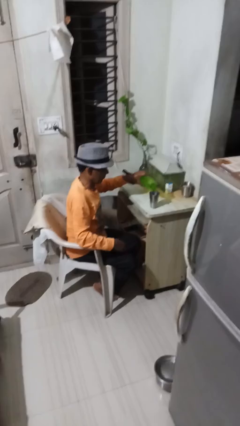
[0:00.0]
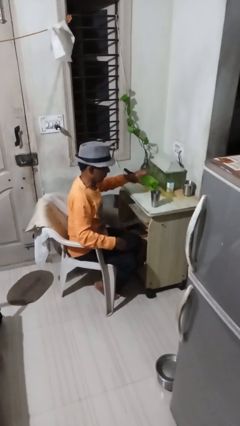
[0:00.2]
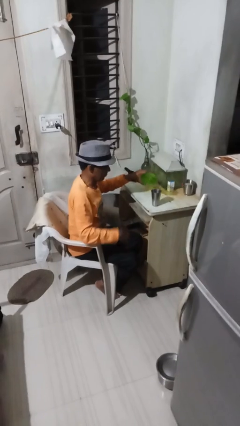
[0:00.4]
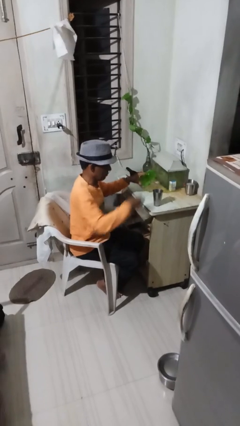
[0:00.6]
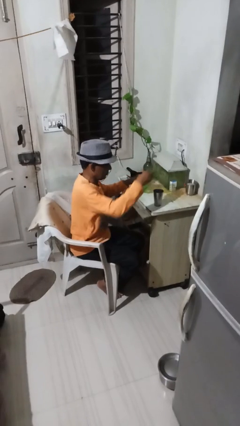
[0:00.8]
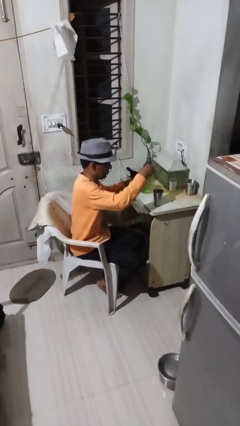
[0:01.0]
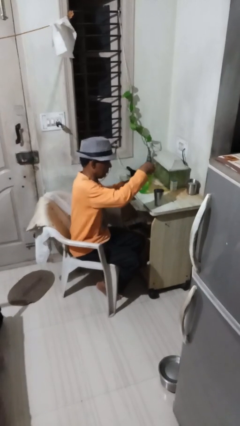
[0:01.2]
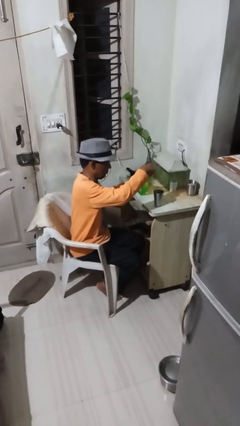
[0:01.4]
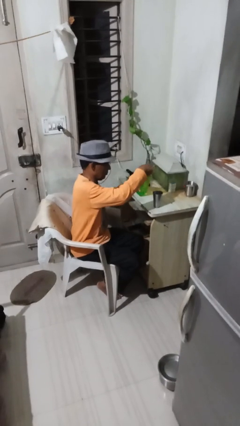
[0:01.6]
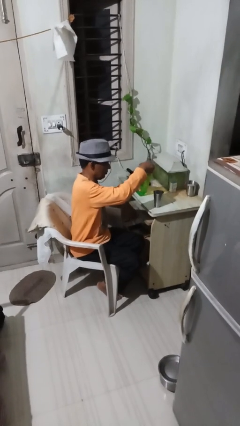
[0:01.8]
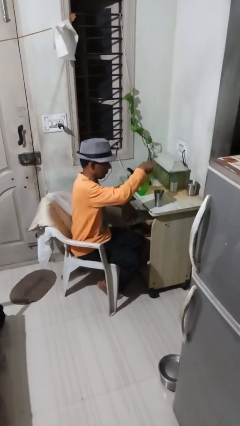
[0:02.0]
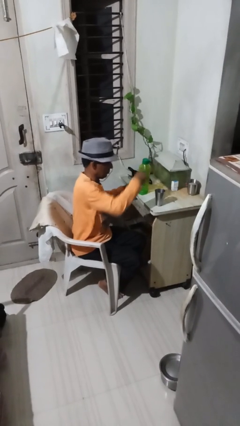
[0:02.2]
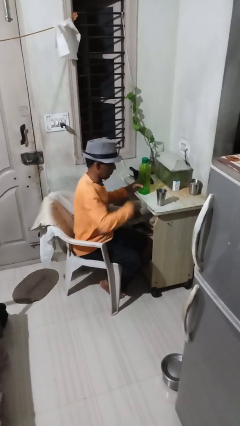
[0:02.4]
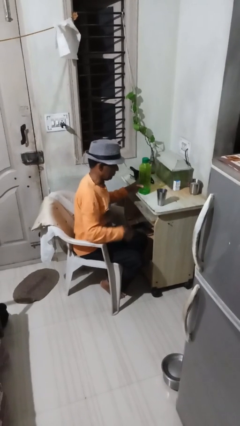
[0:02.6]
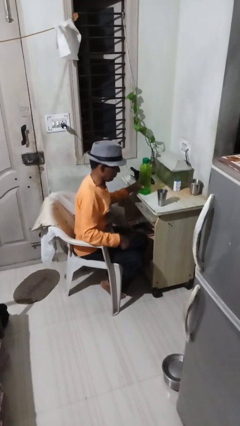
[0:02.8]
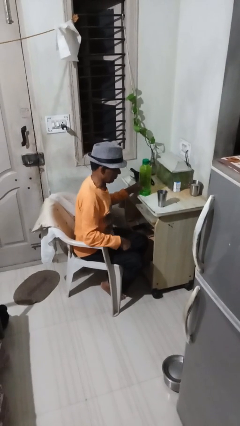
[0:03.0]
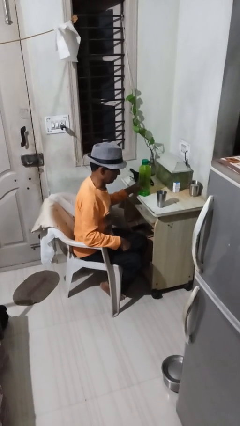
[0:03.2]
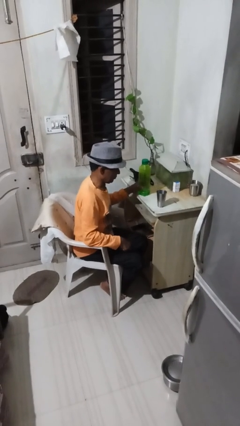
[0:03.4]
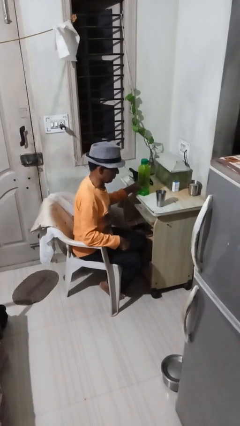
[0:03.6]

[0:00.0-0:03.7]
person screws lid to bottle

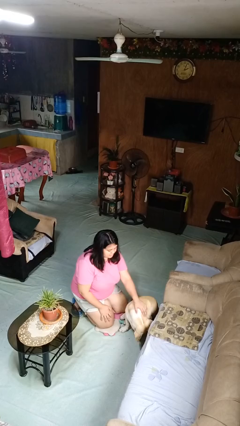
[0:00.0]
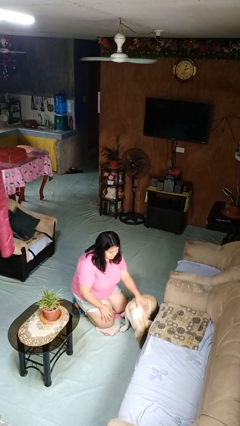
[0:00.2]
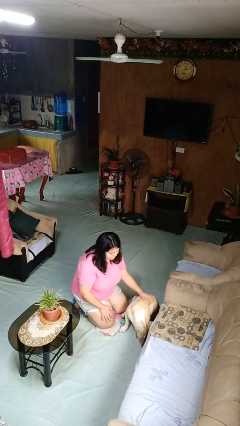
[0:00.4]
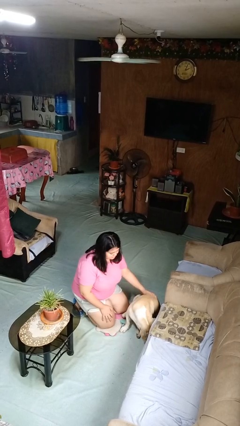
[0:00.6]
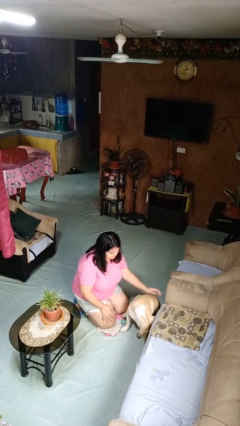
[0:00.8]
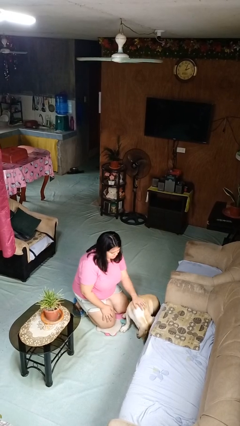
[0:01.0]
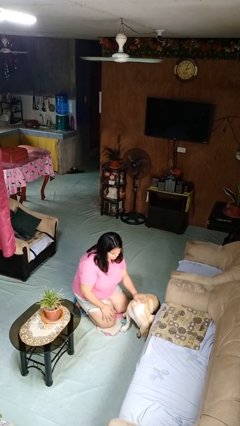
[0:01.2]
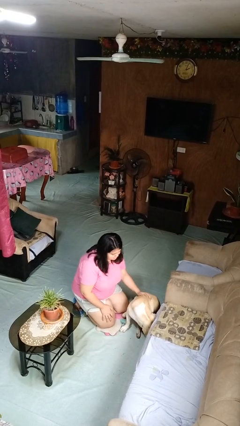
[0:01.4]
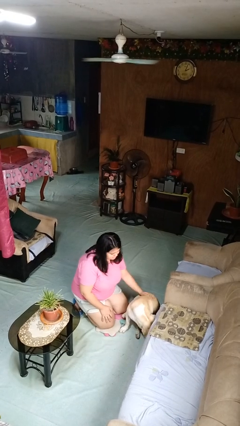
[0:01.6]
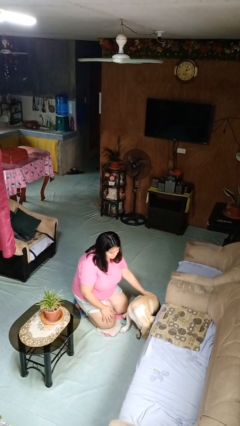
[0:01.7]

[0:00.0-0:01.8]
person pets dog

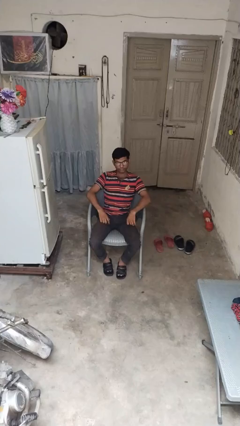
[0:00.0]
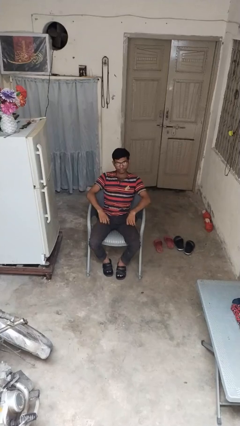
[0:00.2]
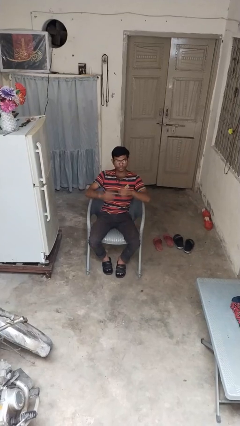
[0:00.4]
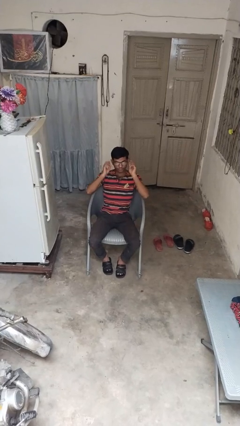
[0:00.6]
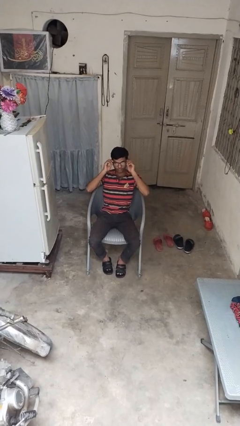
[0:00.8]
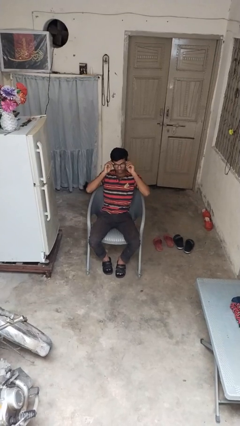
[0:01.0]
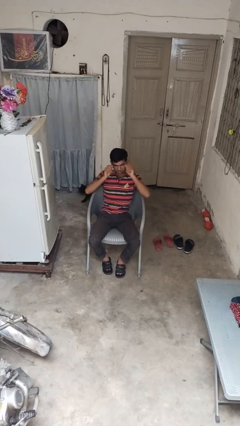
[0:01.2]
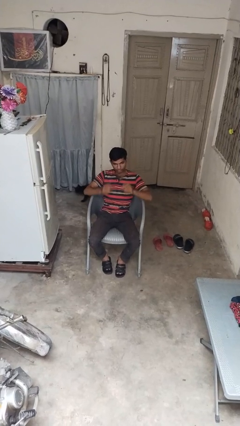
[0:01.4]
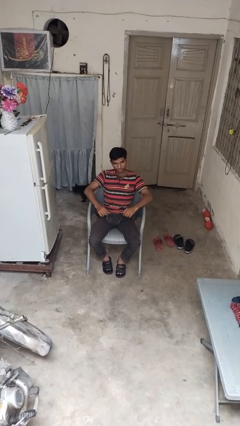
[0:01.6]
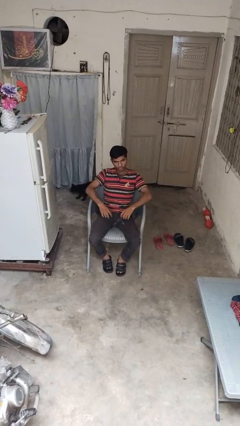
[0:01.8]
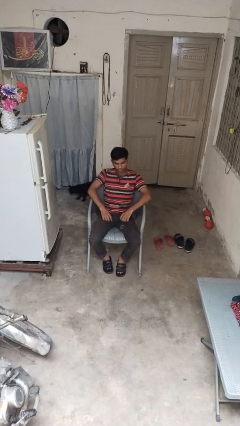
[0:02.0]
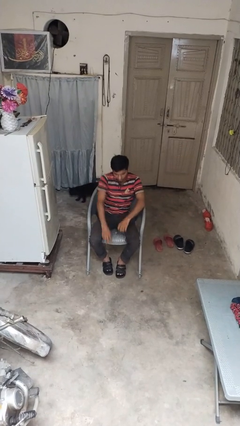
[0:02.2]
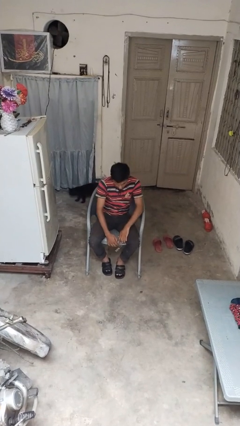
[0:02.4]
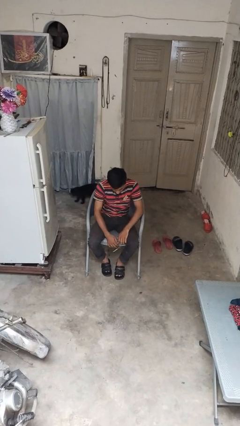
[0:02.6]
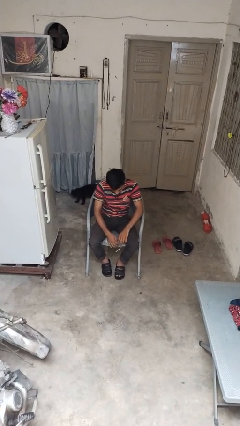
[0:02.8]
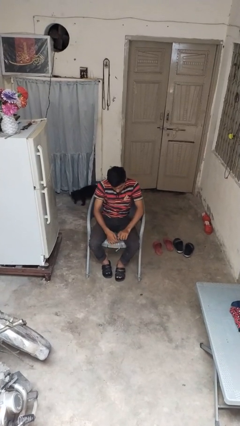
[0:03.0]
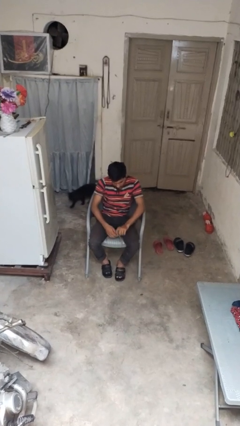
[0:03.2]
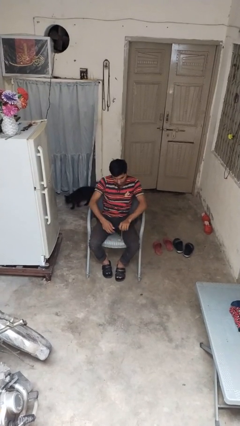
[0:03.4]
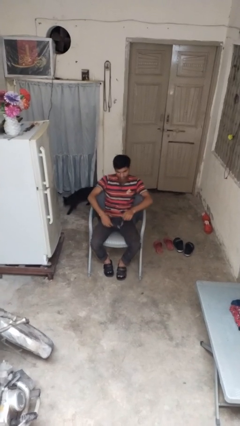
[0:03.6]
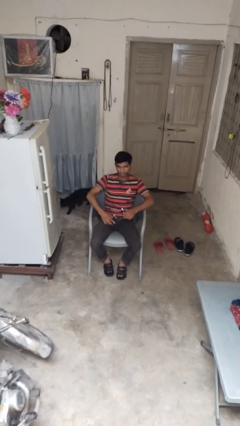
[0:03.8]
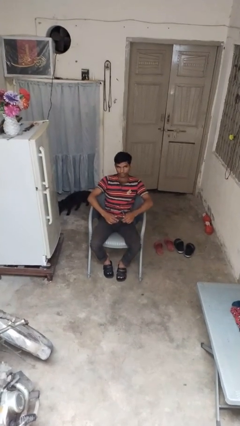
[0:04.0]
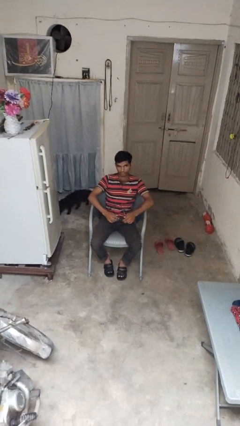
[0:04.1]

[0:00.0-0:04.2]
person takes off glasses

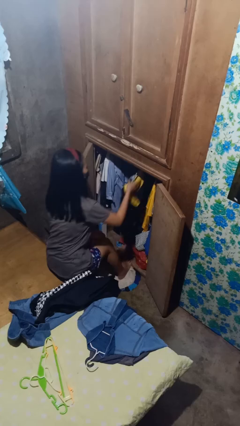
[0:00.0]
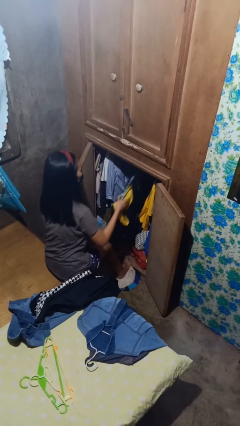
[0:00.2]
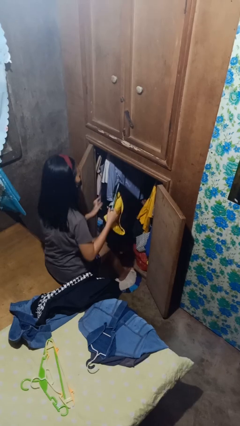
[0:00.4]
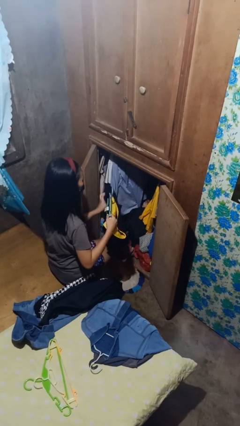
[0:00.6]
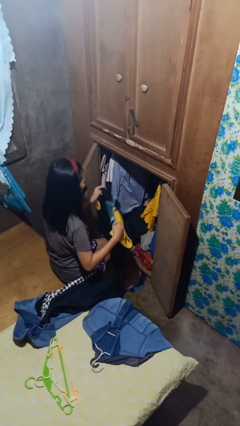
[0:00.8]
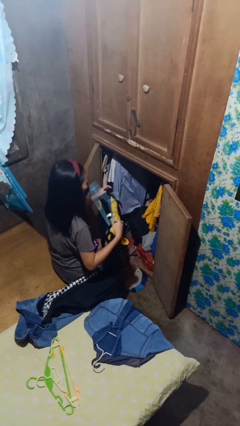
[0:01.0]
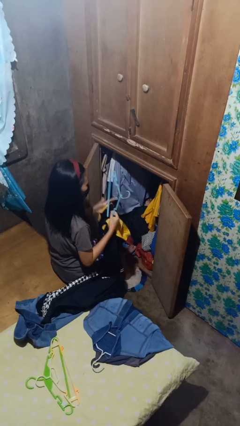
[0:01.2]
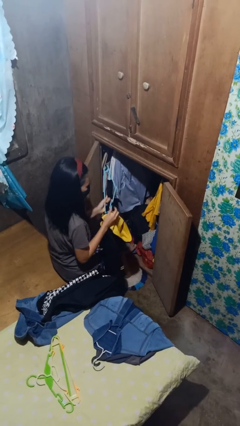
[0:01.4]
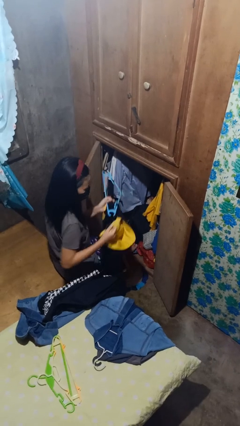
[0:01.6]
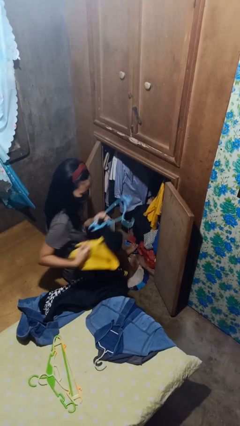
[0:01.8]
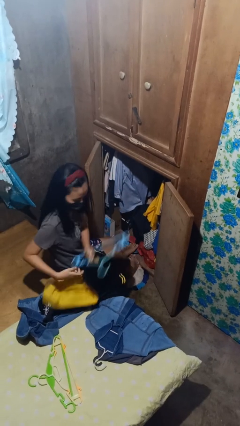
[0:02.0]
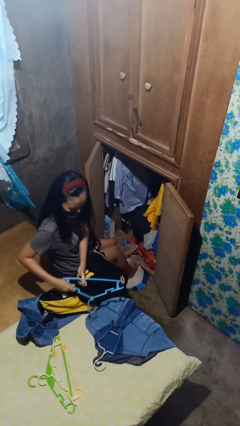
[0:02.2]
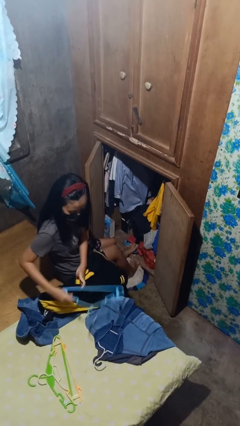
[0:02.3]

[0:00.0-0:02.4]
person takes clothes from closet

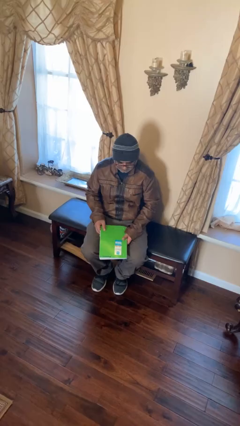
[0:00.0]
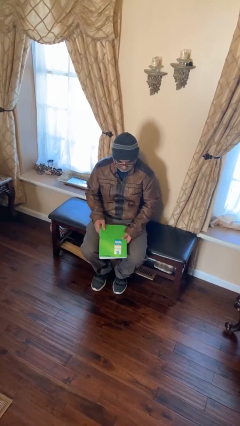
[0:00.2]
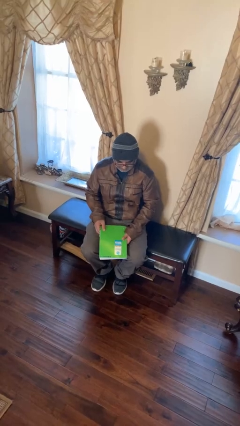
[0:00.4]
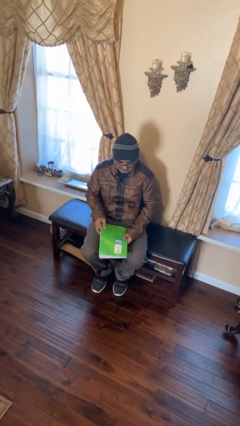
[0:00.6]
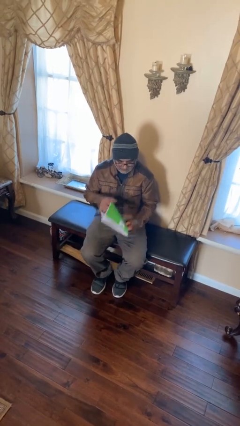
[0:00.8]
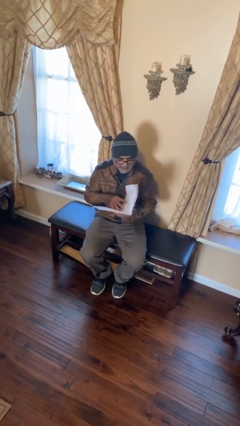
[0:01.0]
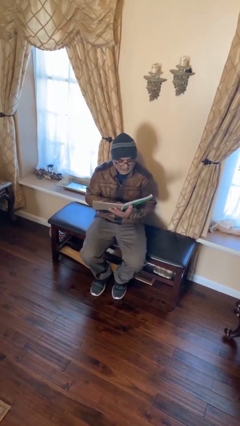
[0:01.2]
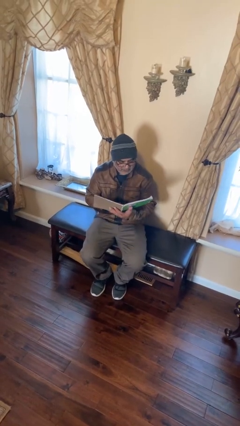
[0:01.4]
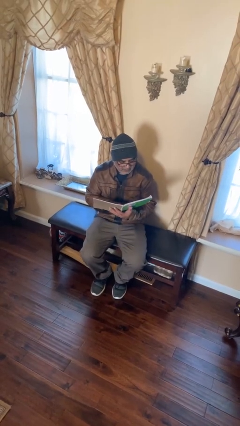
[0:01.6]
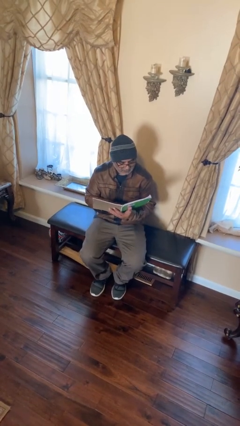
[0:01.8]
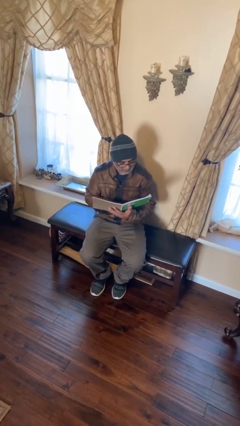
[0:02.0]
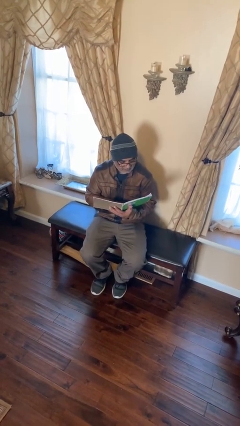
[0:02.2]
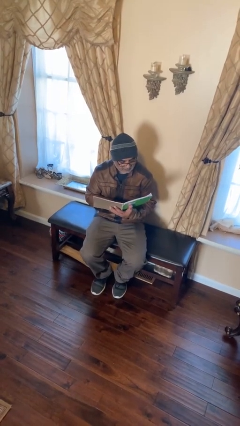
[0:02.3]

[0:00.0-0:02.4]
person reads document

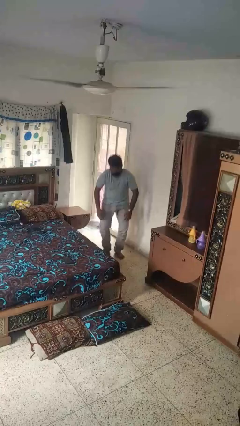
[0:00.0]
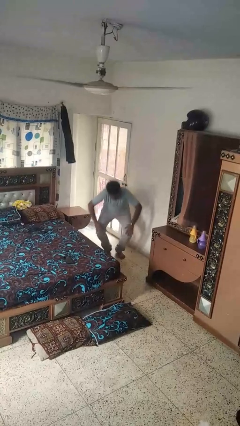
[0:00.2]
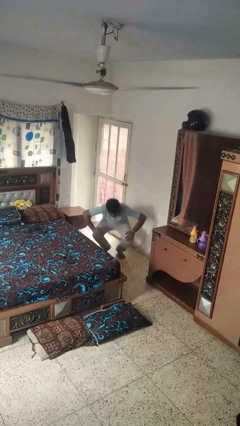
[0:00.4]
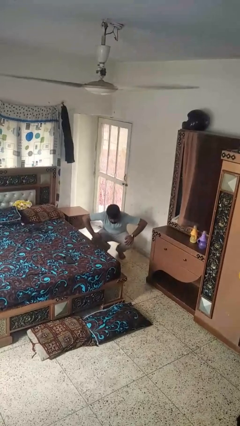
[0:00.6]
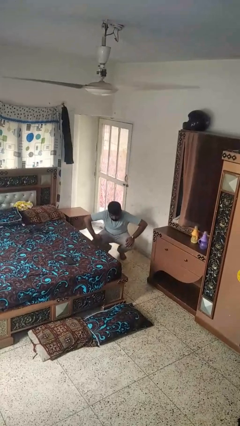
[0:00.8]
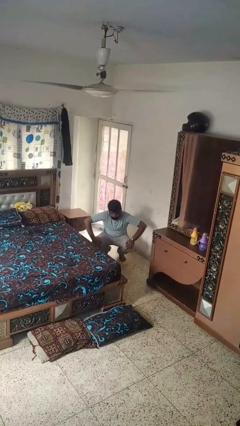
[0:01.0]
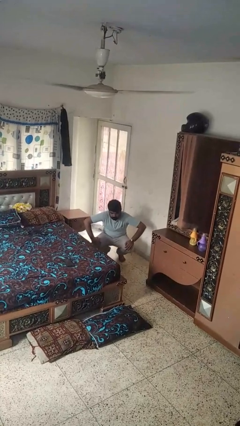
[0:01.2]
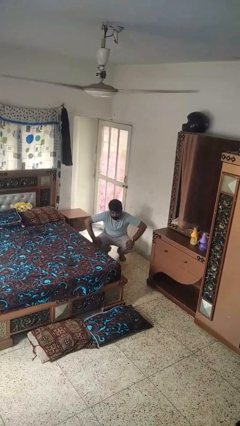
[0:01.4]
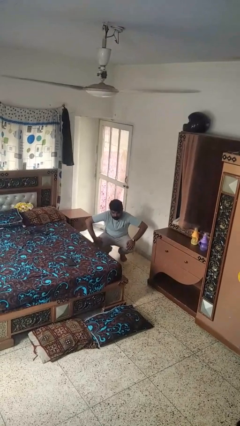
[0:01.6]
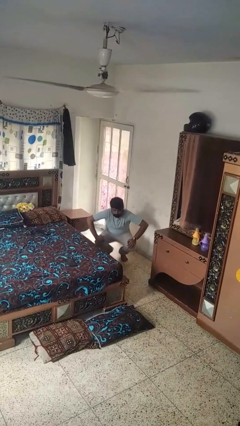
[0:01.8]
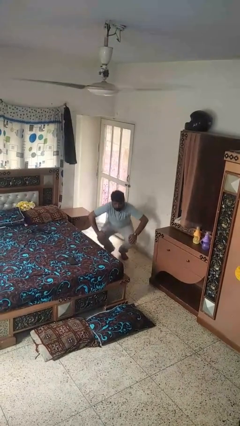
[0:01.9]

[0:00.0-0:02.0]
person squats

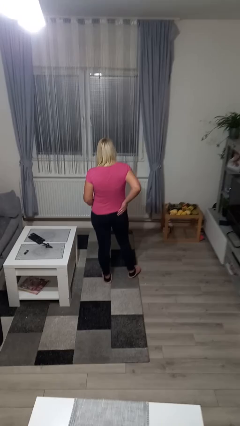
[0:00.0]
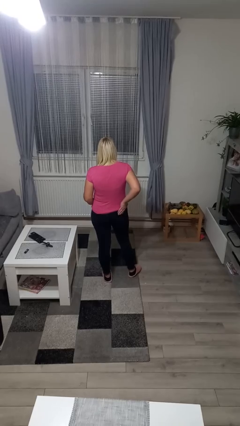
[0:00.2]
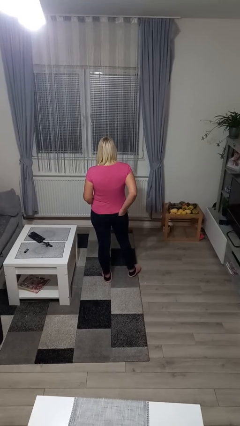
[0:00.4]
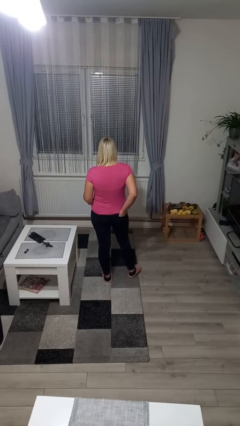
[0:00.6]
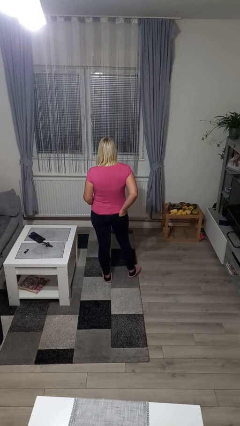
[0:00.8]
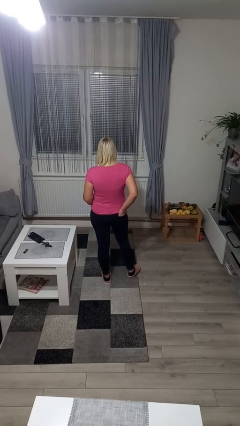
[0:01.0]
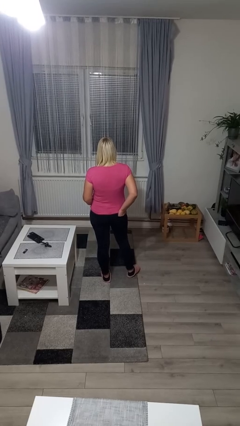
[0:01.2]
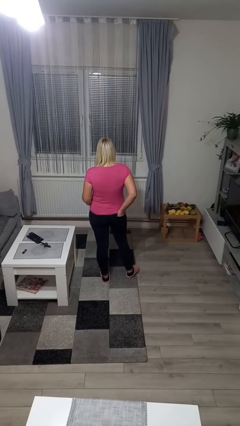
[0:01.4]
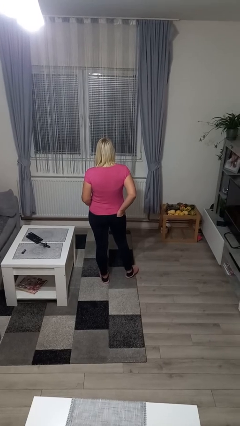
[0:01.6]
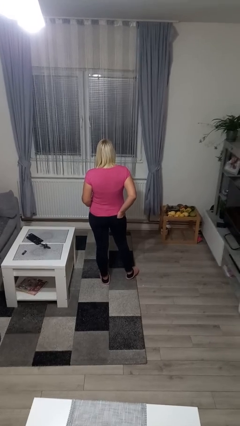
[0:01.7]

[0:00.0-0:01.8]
person puts hands in back pockets
